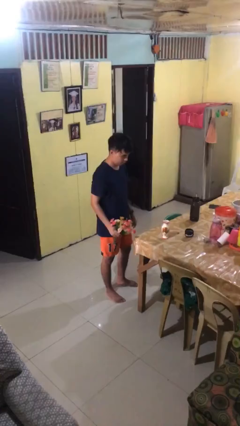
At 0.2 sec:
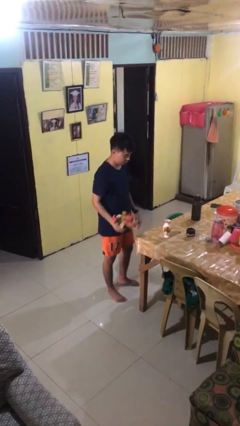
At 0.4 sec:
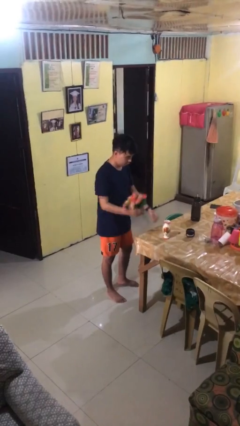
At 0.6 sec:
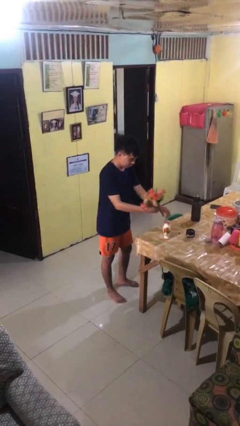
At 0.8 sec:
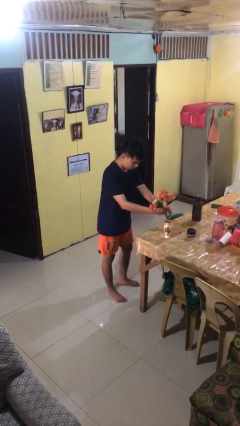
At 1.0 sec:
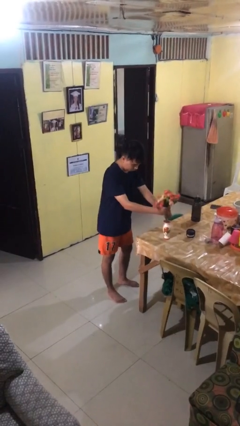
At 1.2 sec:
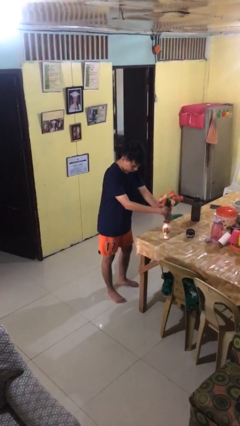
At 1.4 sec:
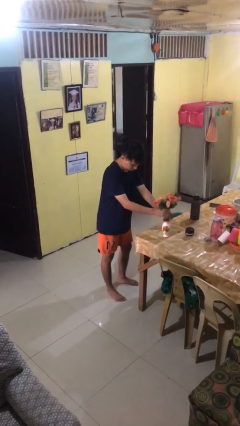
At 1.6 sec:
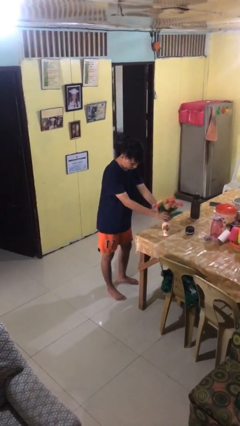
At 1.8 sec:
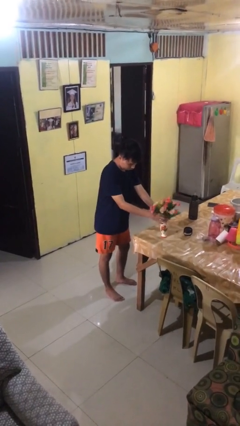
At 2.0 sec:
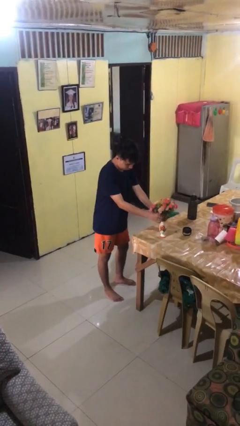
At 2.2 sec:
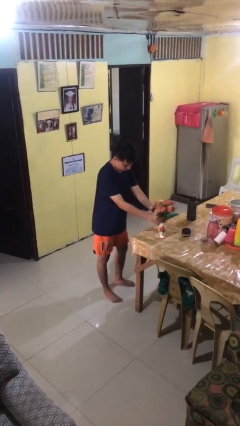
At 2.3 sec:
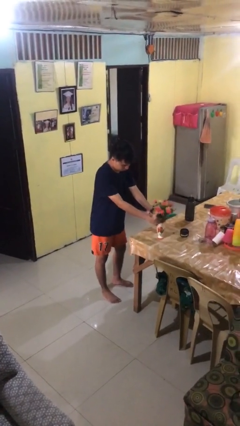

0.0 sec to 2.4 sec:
person arranges flowers in vase

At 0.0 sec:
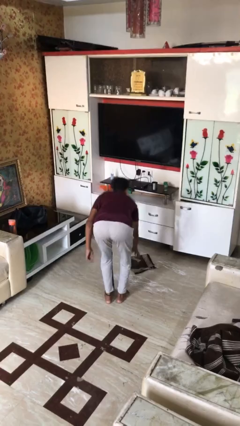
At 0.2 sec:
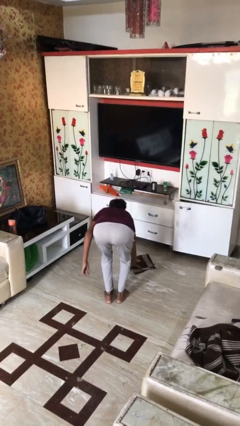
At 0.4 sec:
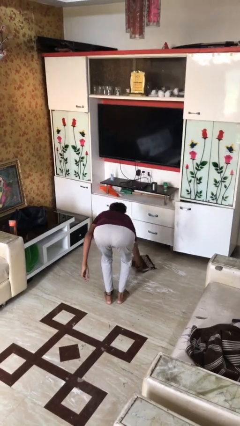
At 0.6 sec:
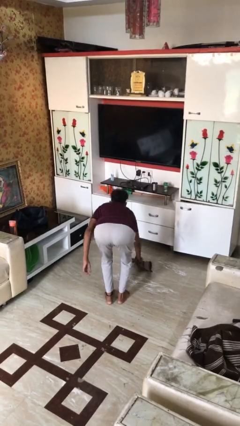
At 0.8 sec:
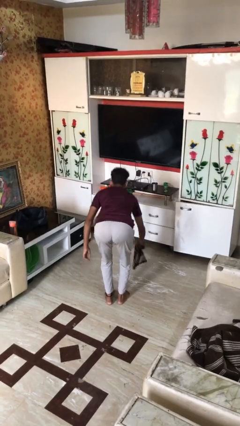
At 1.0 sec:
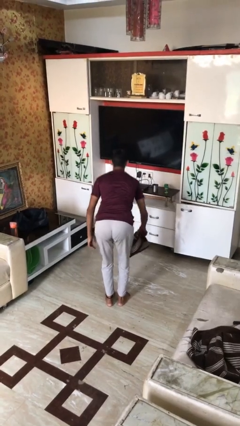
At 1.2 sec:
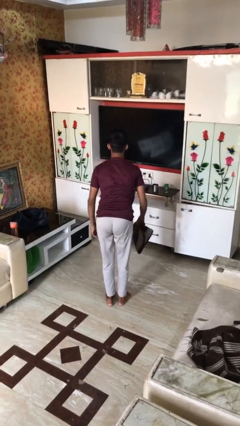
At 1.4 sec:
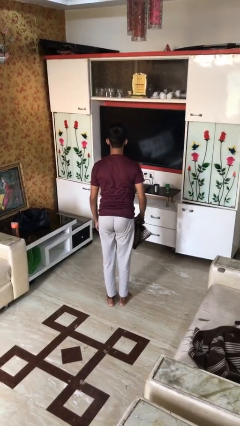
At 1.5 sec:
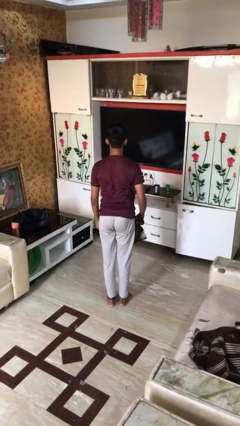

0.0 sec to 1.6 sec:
person picks up object from floor

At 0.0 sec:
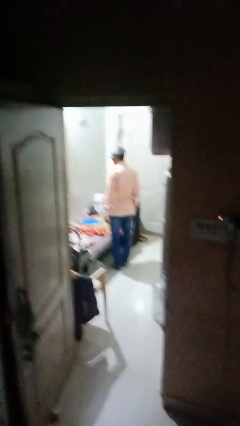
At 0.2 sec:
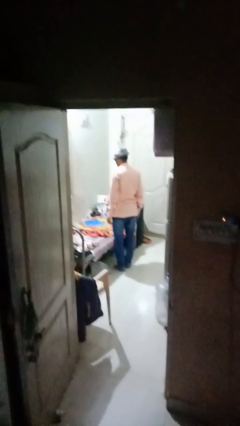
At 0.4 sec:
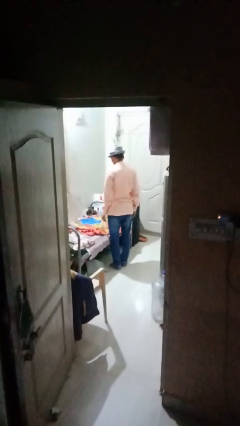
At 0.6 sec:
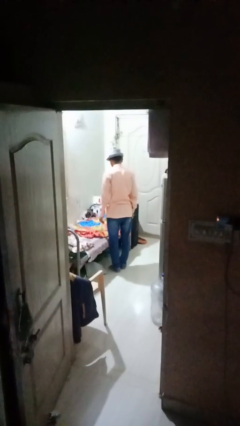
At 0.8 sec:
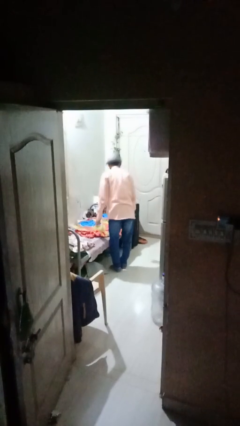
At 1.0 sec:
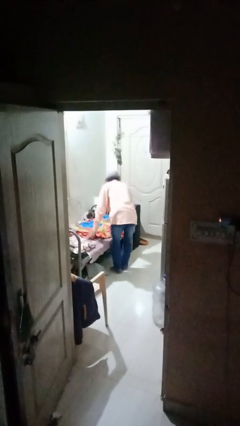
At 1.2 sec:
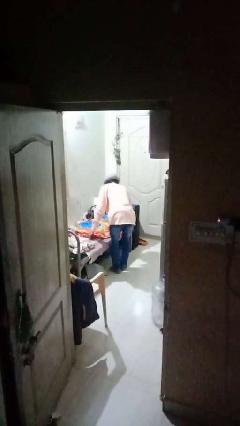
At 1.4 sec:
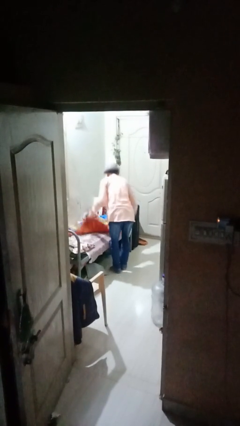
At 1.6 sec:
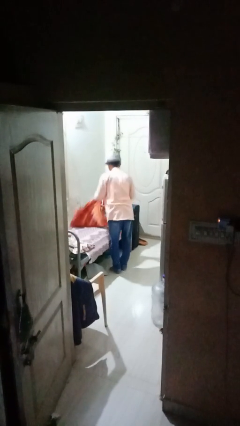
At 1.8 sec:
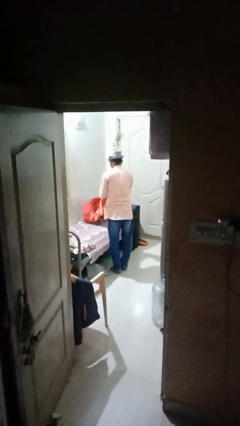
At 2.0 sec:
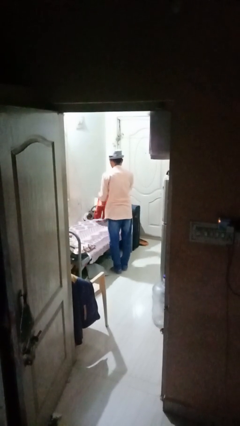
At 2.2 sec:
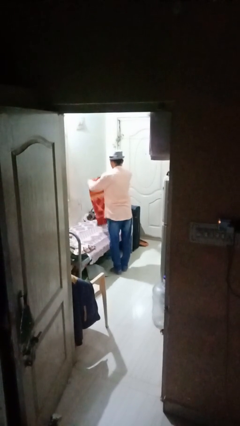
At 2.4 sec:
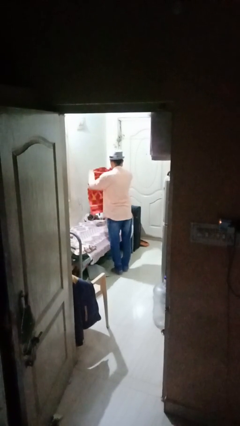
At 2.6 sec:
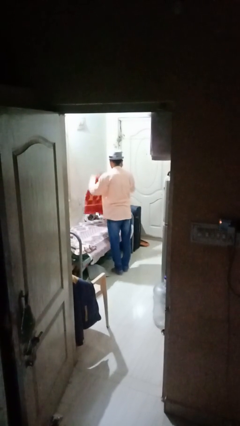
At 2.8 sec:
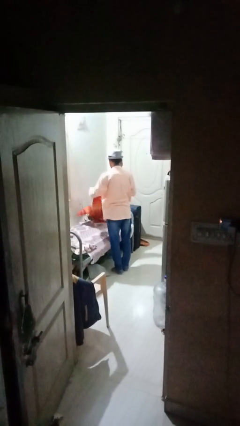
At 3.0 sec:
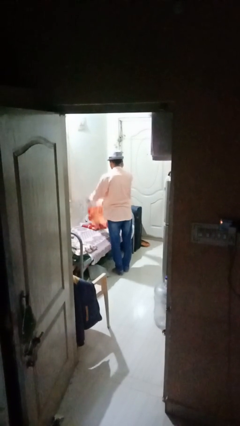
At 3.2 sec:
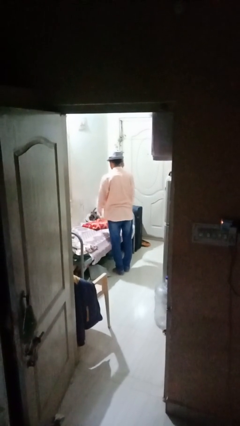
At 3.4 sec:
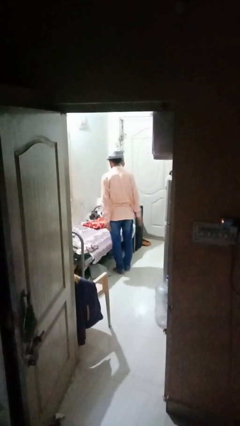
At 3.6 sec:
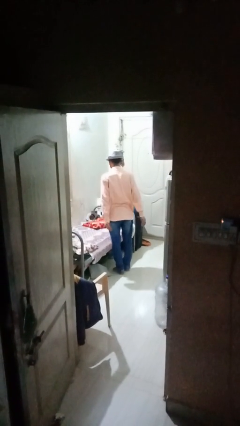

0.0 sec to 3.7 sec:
person folds blanket

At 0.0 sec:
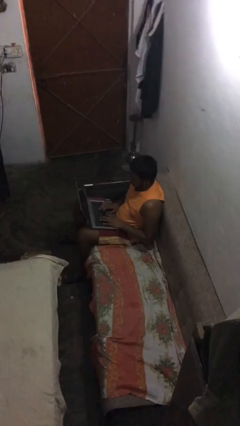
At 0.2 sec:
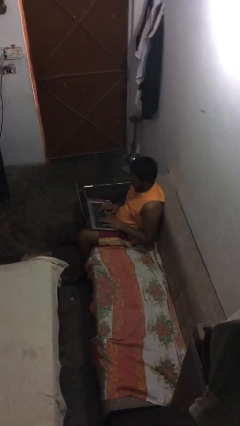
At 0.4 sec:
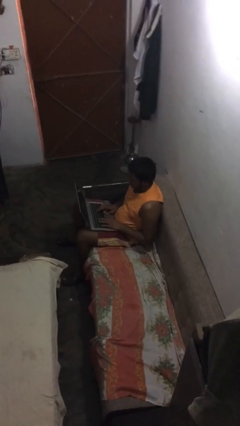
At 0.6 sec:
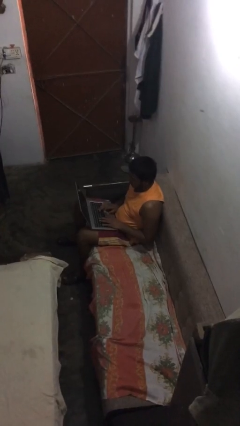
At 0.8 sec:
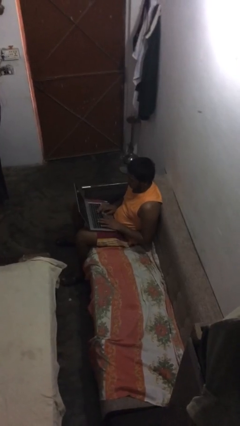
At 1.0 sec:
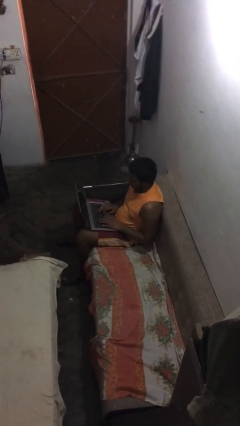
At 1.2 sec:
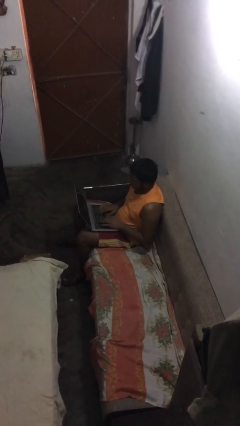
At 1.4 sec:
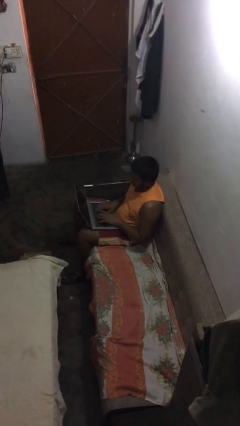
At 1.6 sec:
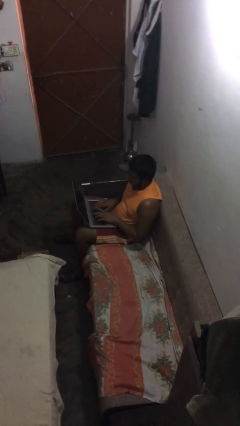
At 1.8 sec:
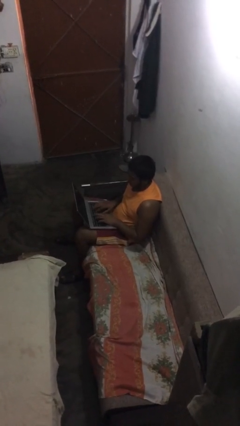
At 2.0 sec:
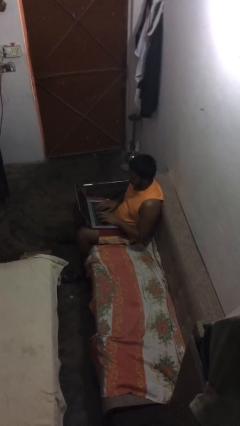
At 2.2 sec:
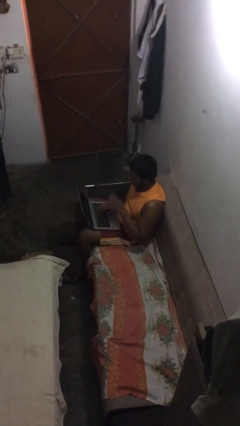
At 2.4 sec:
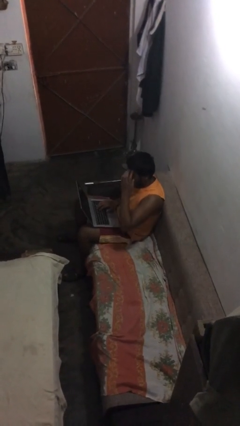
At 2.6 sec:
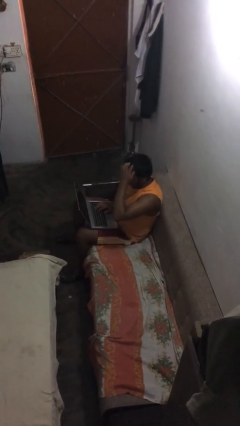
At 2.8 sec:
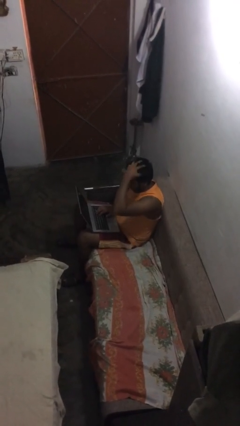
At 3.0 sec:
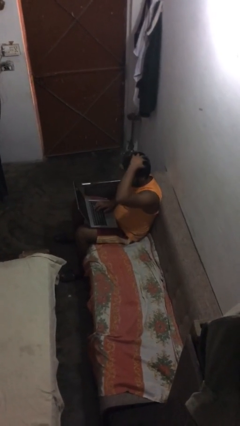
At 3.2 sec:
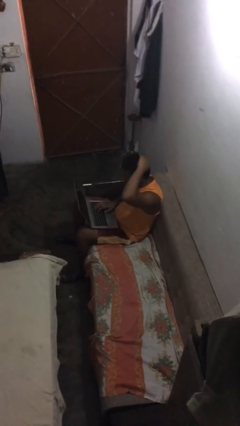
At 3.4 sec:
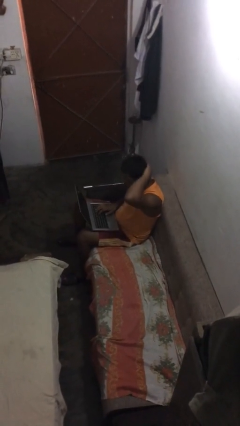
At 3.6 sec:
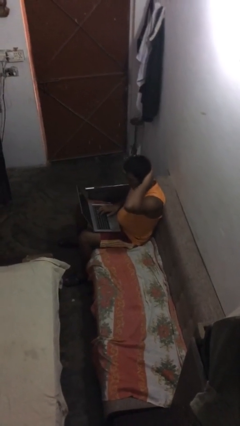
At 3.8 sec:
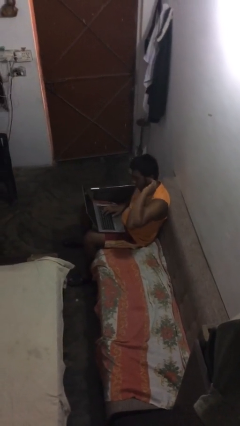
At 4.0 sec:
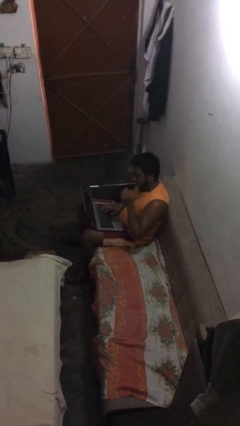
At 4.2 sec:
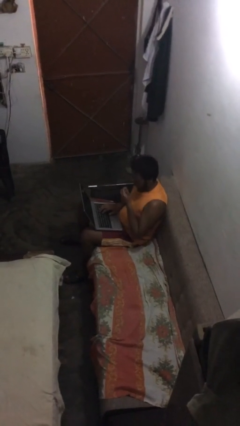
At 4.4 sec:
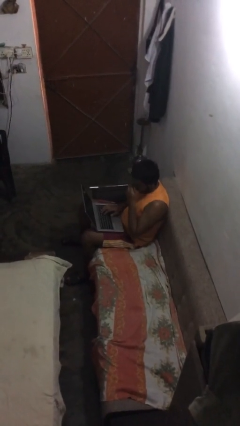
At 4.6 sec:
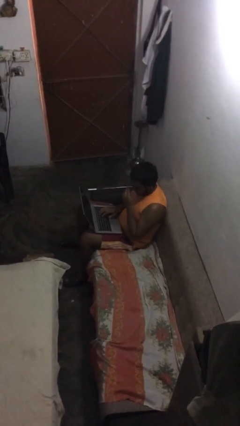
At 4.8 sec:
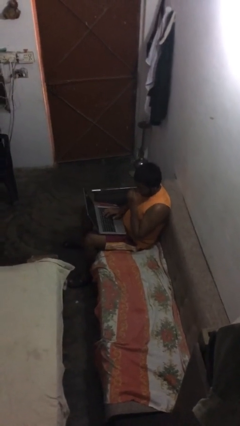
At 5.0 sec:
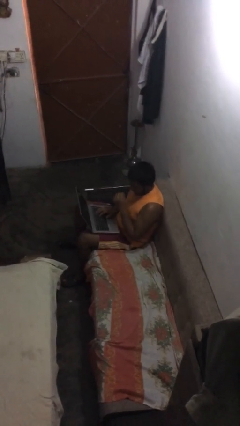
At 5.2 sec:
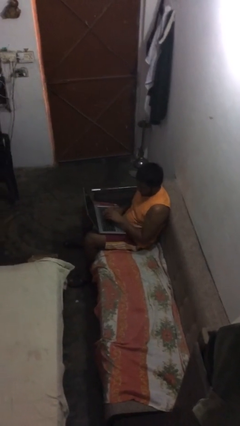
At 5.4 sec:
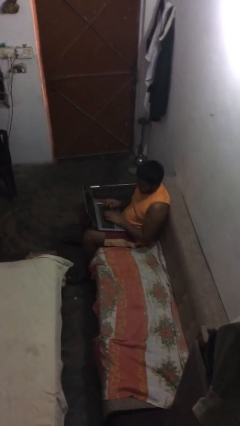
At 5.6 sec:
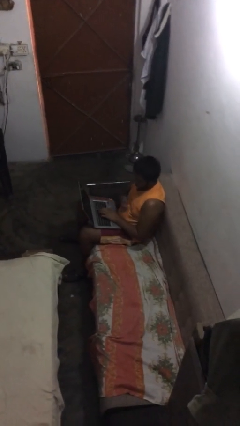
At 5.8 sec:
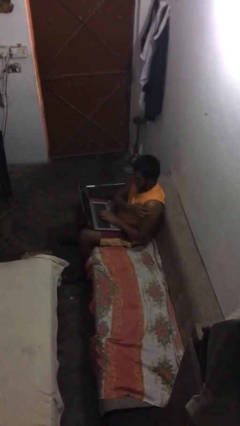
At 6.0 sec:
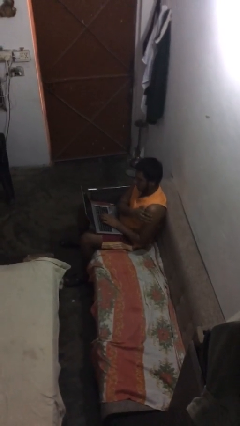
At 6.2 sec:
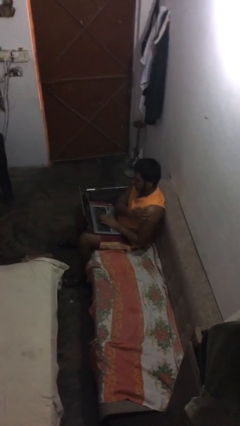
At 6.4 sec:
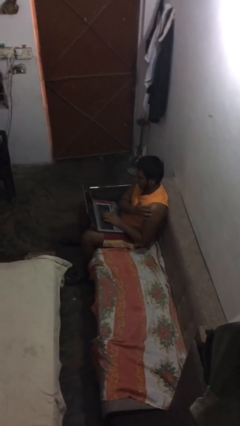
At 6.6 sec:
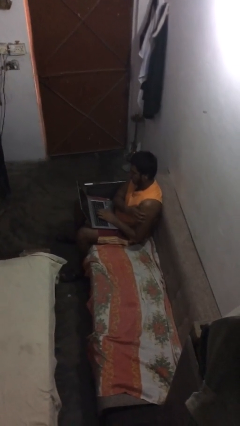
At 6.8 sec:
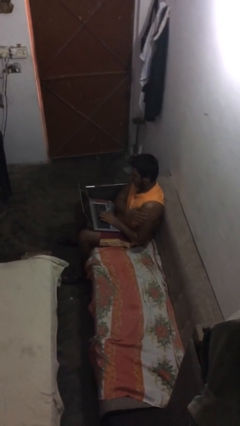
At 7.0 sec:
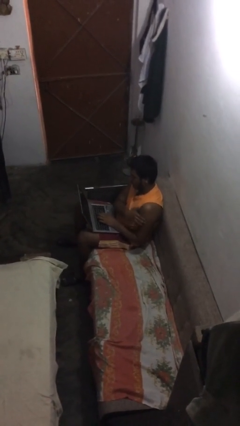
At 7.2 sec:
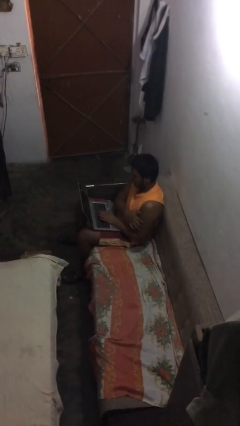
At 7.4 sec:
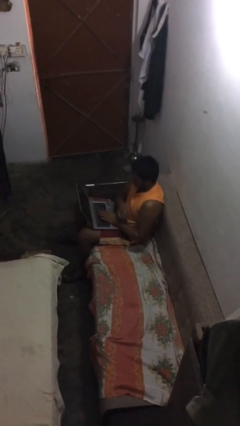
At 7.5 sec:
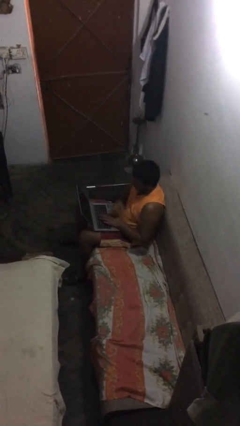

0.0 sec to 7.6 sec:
person interacts with laptop

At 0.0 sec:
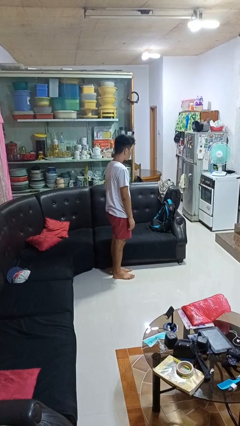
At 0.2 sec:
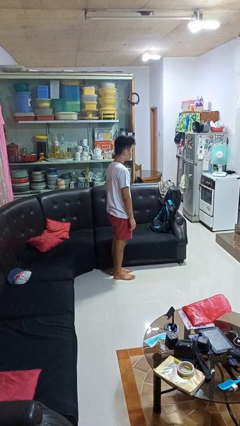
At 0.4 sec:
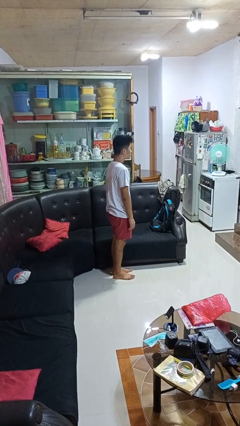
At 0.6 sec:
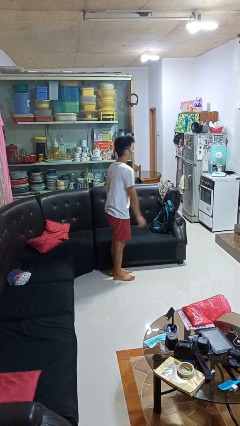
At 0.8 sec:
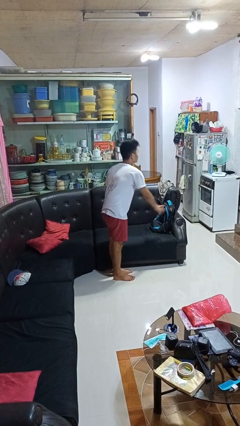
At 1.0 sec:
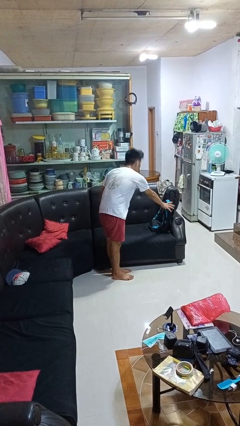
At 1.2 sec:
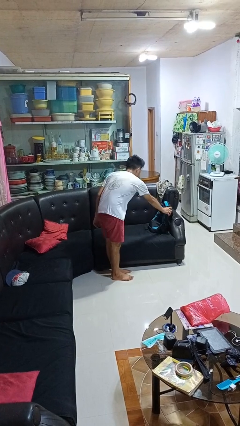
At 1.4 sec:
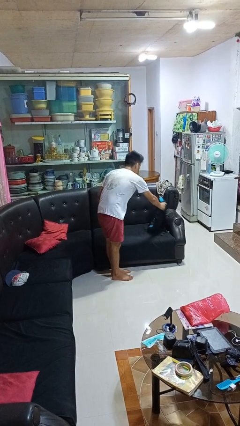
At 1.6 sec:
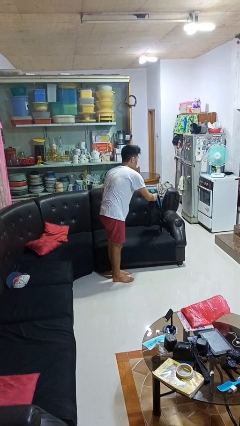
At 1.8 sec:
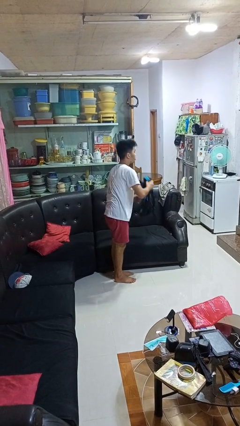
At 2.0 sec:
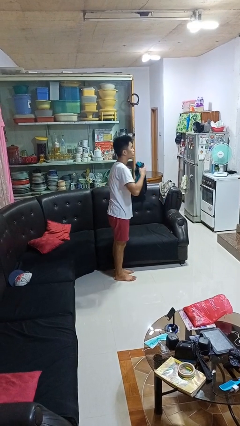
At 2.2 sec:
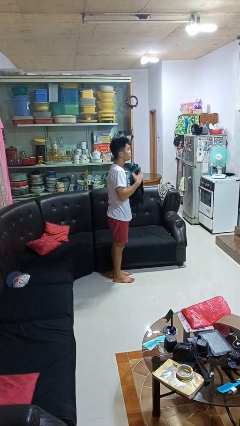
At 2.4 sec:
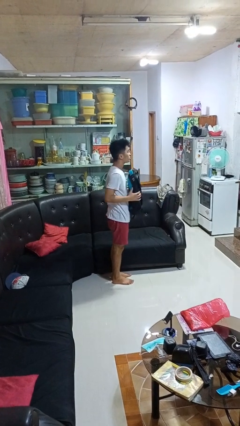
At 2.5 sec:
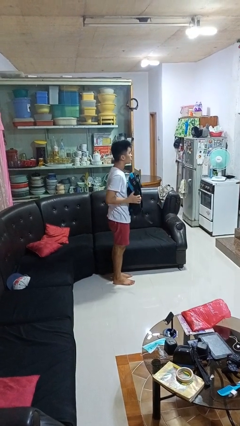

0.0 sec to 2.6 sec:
person picks up object from couch
